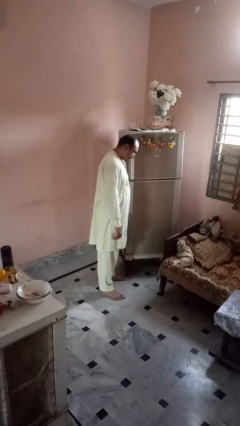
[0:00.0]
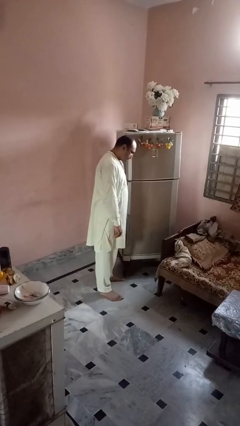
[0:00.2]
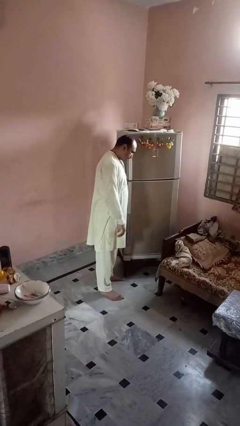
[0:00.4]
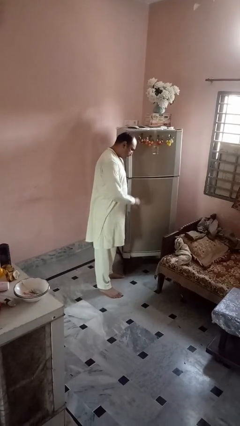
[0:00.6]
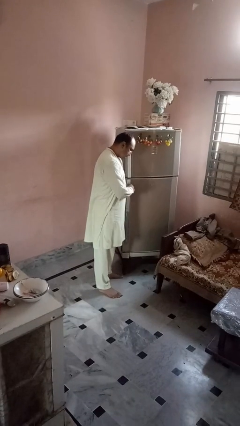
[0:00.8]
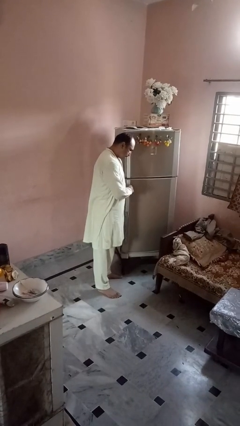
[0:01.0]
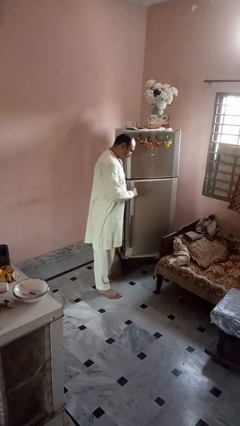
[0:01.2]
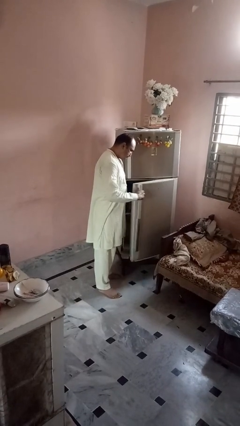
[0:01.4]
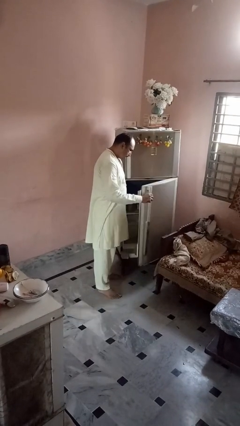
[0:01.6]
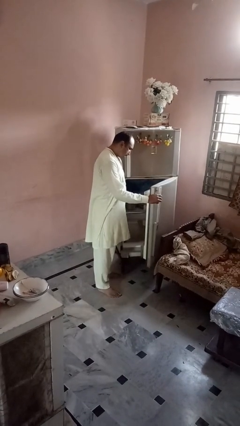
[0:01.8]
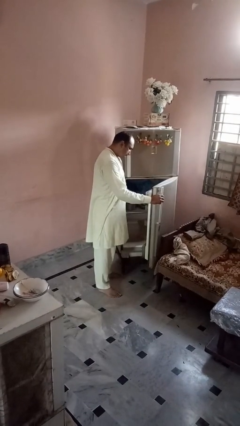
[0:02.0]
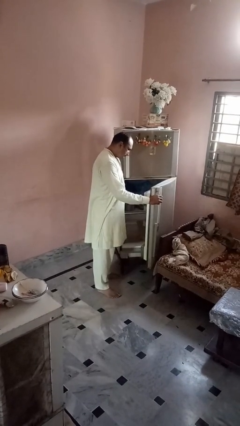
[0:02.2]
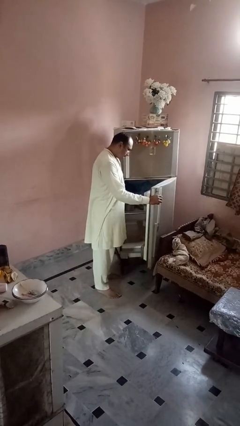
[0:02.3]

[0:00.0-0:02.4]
person opens refrigerator

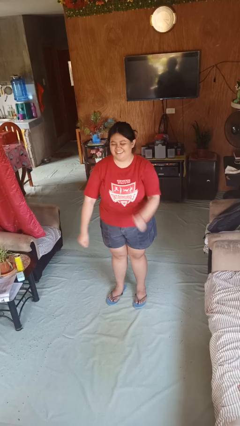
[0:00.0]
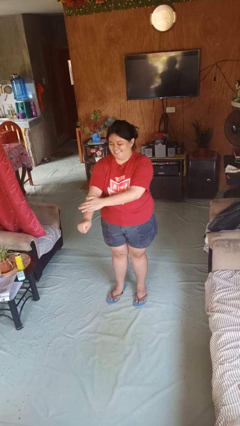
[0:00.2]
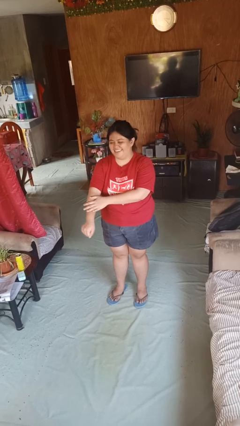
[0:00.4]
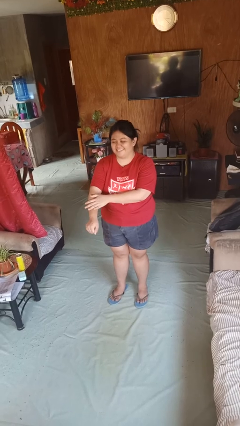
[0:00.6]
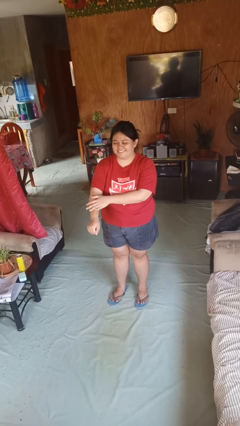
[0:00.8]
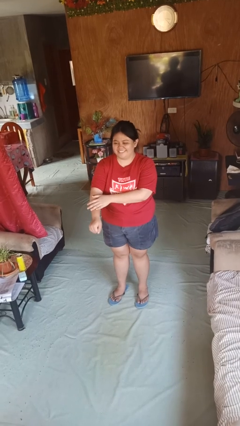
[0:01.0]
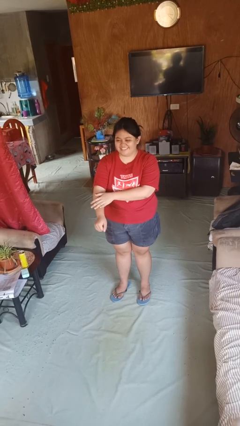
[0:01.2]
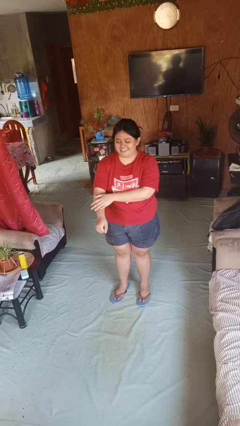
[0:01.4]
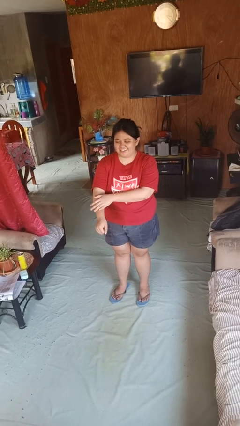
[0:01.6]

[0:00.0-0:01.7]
person swats bug

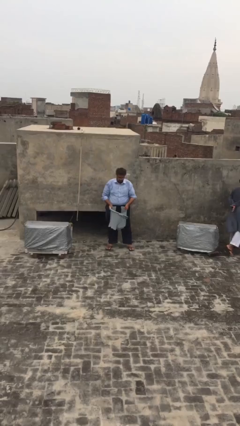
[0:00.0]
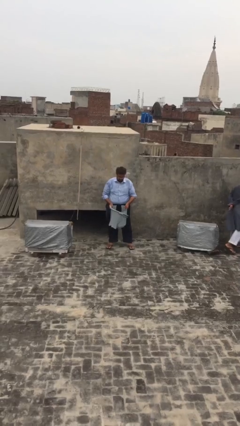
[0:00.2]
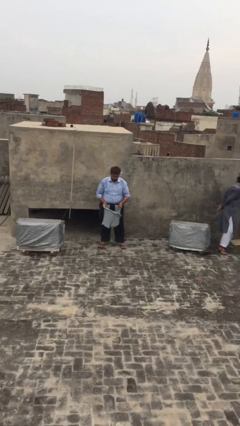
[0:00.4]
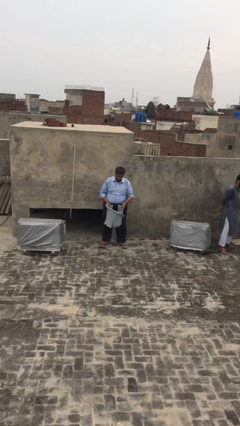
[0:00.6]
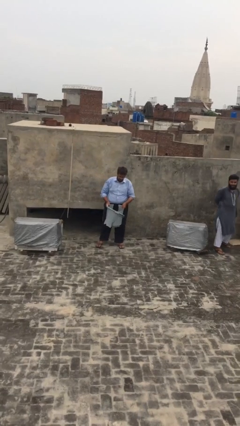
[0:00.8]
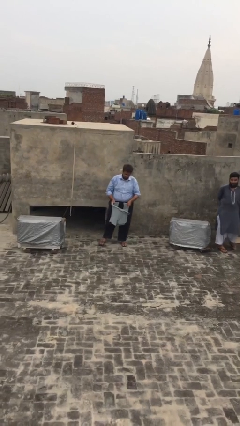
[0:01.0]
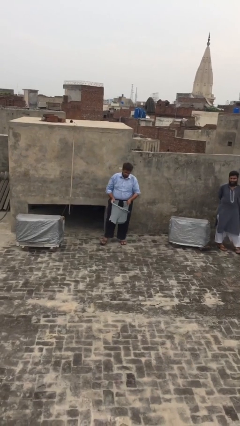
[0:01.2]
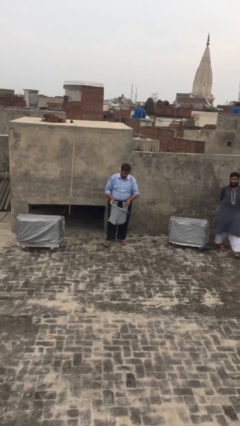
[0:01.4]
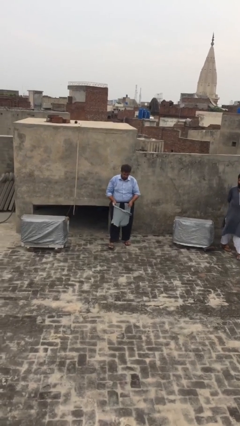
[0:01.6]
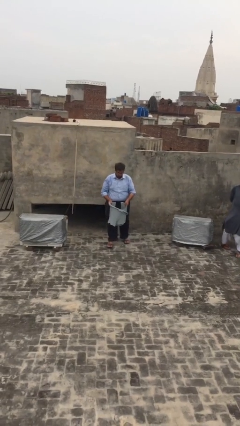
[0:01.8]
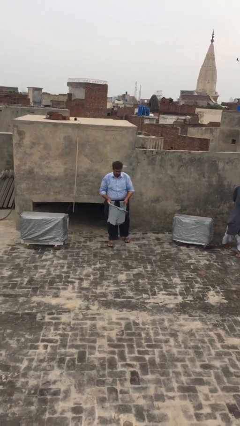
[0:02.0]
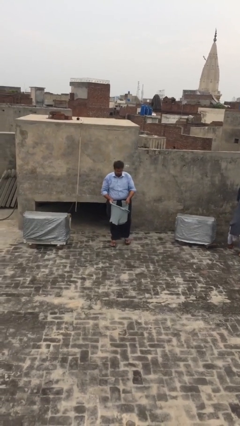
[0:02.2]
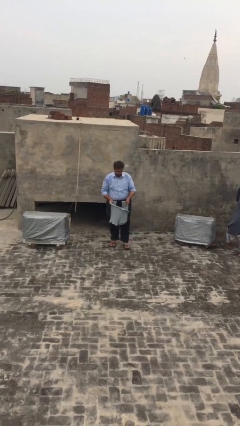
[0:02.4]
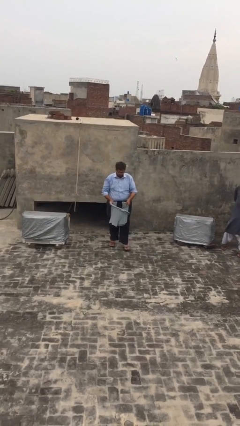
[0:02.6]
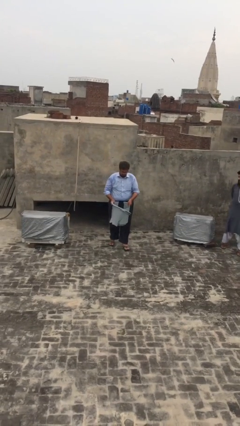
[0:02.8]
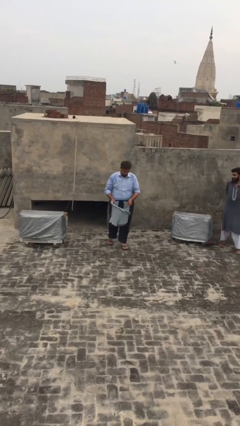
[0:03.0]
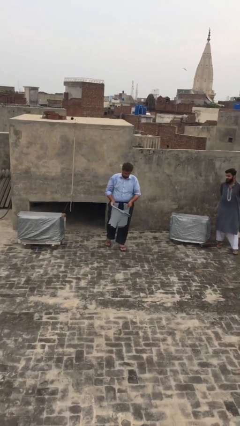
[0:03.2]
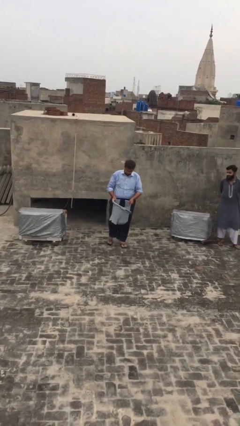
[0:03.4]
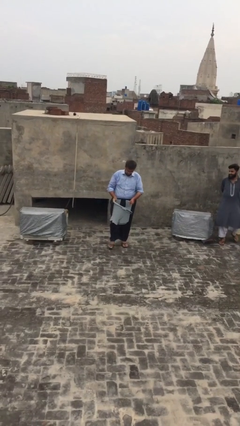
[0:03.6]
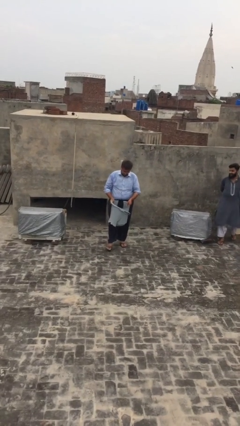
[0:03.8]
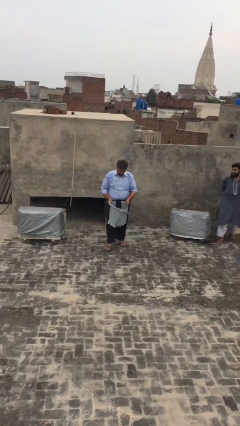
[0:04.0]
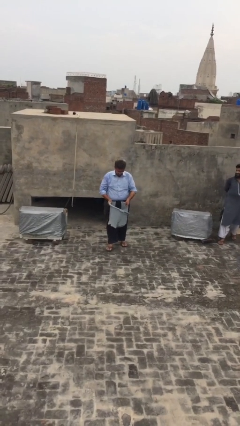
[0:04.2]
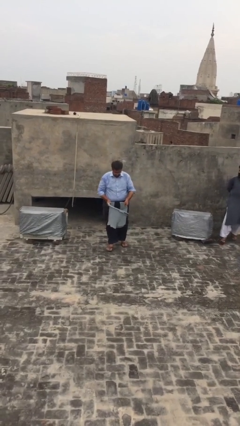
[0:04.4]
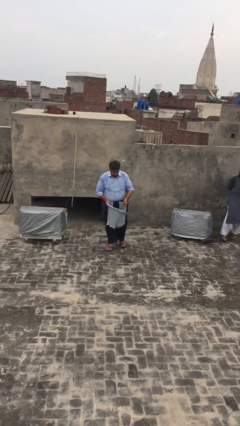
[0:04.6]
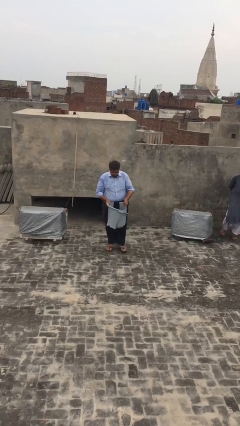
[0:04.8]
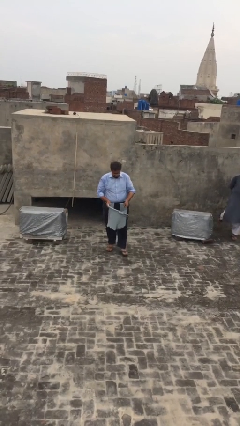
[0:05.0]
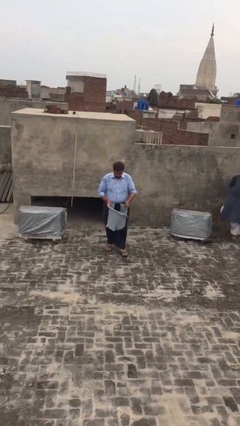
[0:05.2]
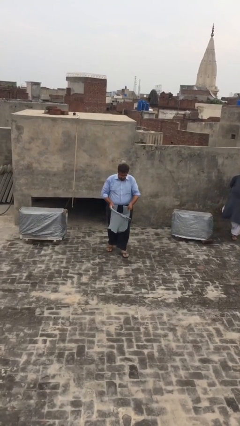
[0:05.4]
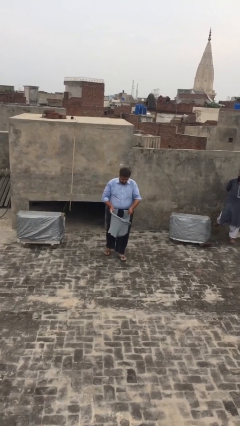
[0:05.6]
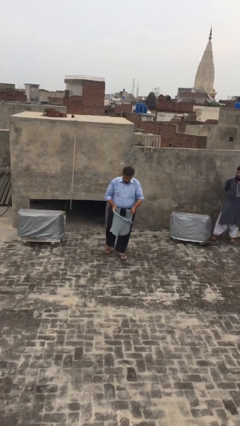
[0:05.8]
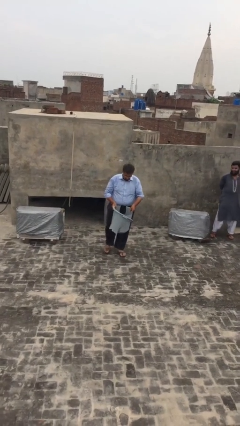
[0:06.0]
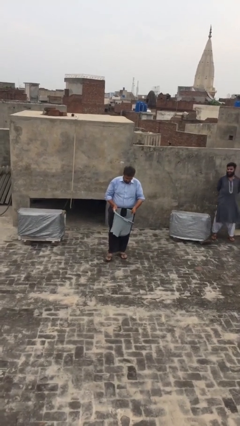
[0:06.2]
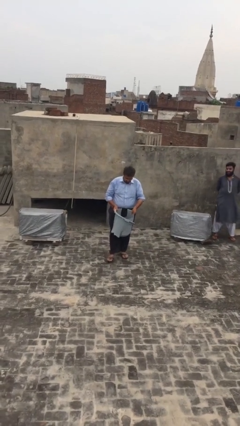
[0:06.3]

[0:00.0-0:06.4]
person carries heavy object

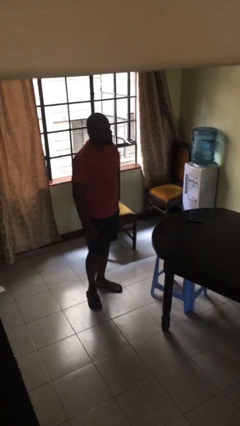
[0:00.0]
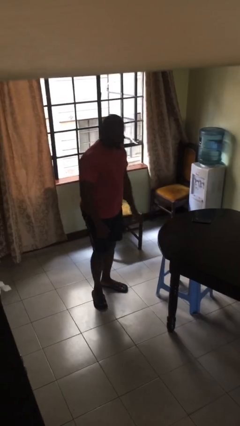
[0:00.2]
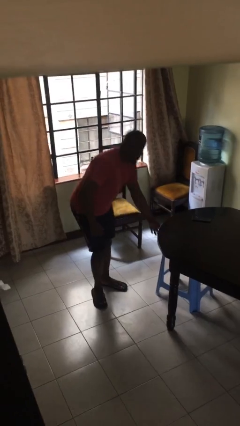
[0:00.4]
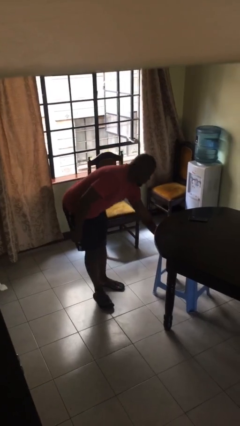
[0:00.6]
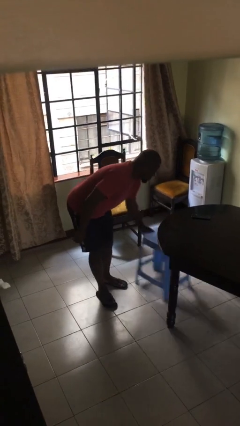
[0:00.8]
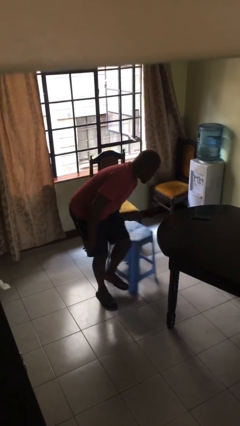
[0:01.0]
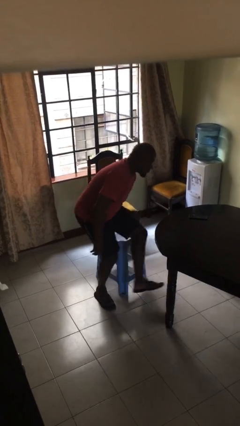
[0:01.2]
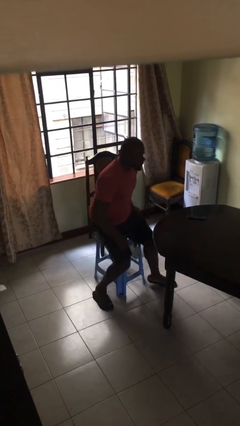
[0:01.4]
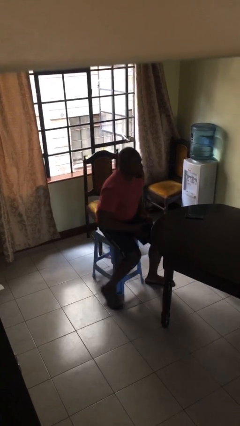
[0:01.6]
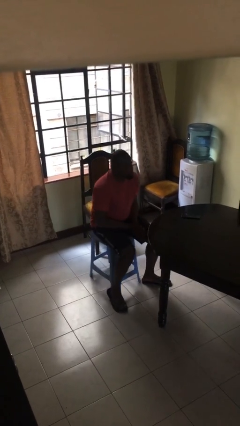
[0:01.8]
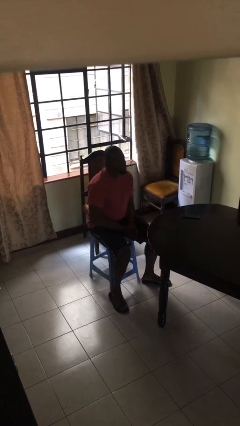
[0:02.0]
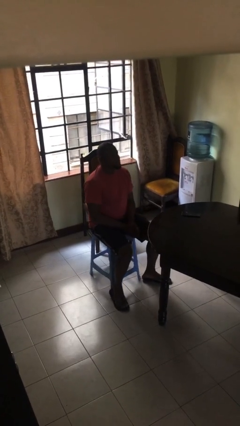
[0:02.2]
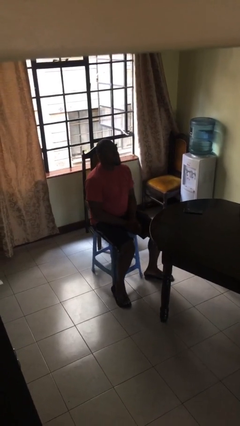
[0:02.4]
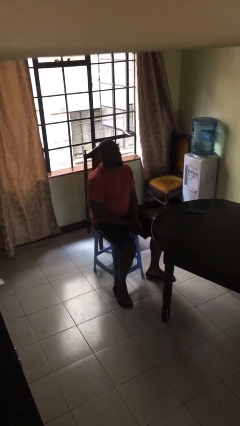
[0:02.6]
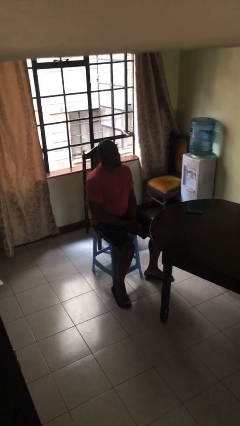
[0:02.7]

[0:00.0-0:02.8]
person sits down

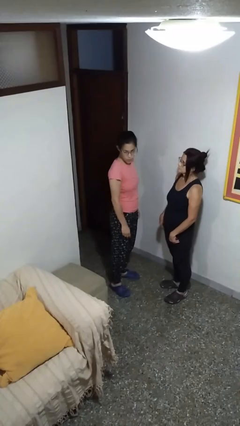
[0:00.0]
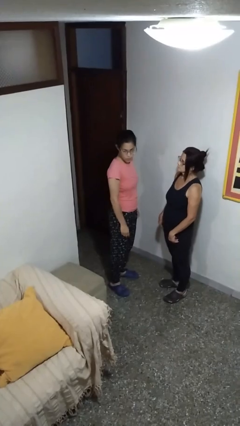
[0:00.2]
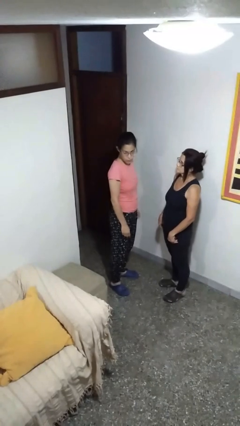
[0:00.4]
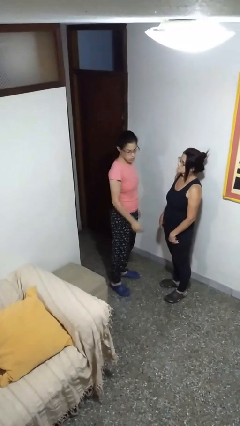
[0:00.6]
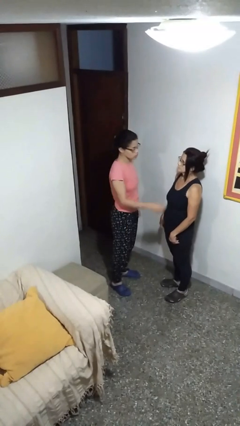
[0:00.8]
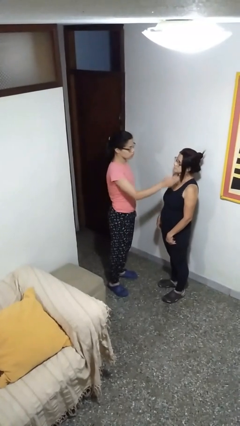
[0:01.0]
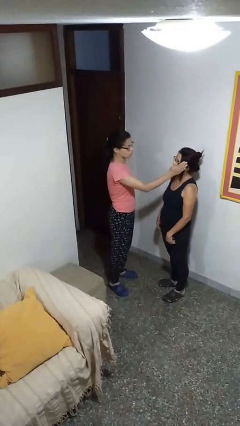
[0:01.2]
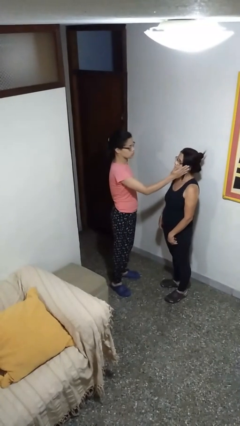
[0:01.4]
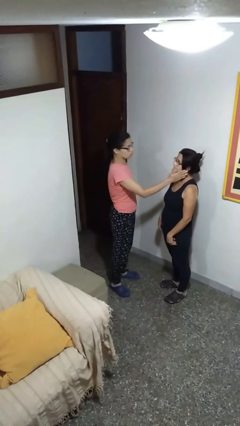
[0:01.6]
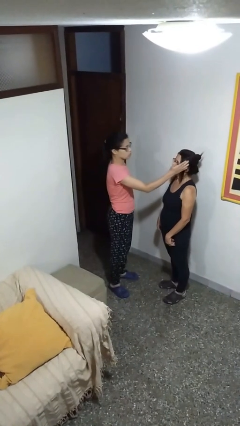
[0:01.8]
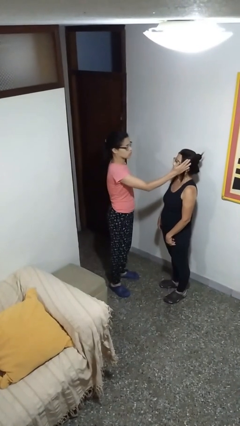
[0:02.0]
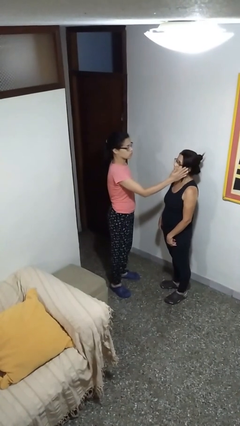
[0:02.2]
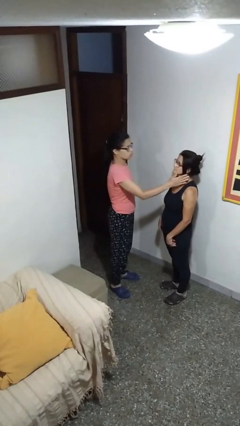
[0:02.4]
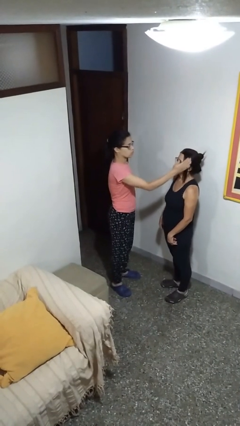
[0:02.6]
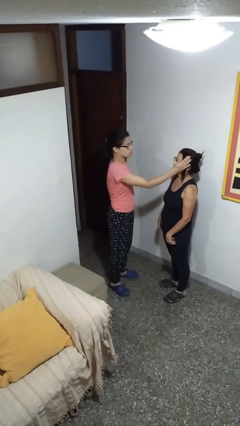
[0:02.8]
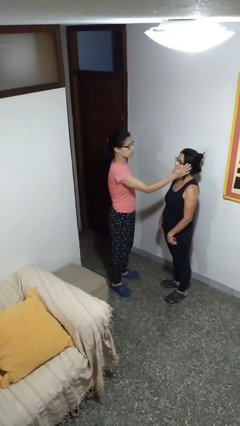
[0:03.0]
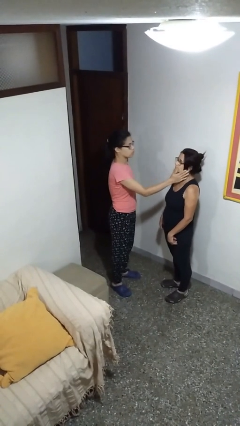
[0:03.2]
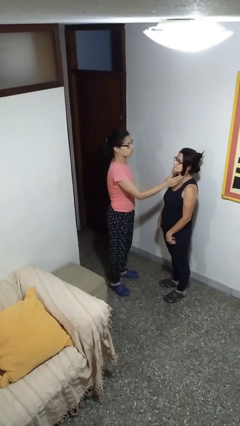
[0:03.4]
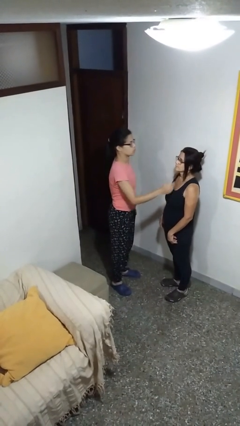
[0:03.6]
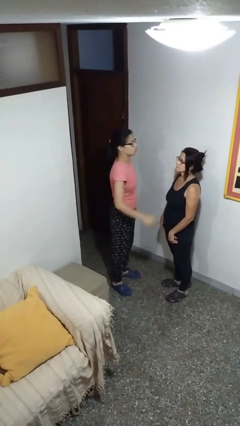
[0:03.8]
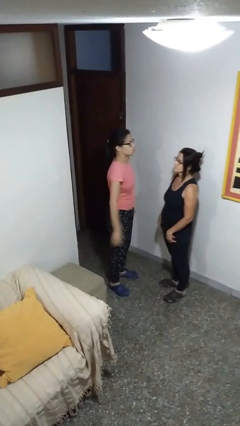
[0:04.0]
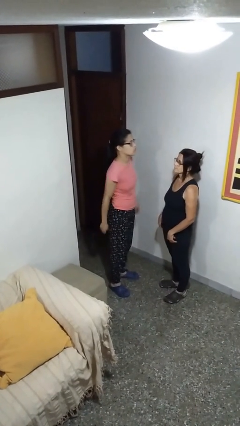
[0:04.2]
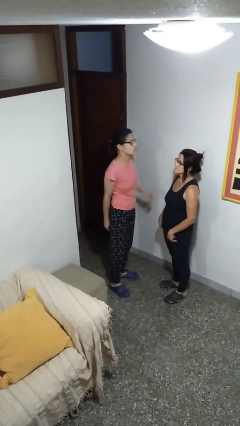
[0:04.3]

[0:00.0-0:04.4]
person touches face of person
